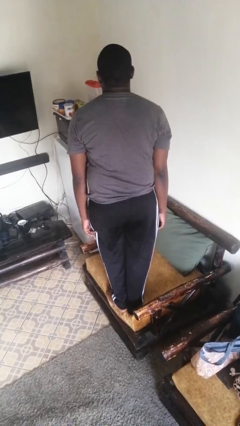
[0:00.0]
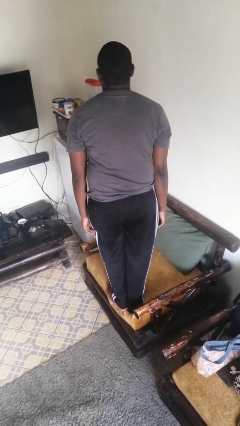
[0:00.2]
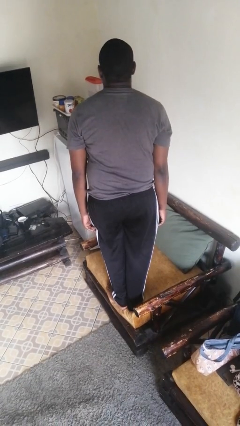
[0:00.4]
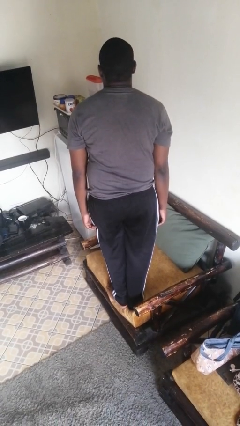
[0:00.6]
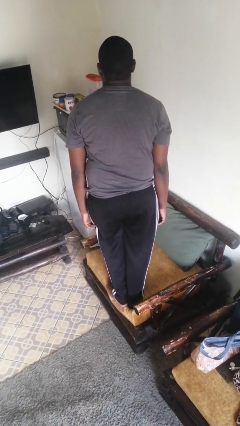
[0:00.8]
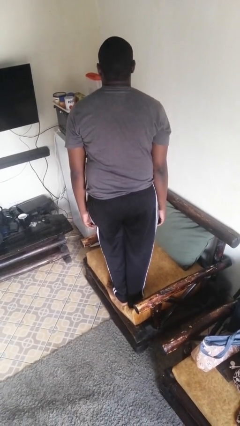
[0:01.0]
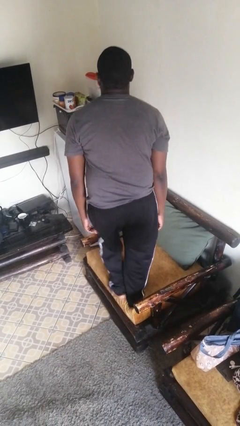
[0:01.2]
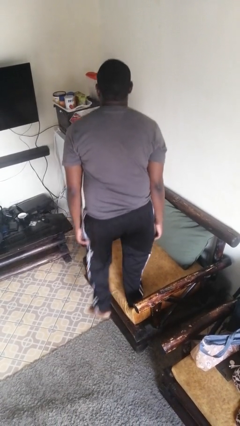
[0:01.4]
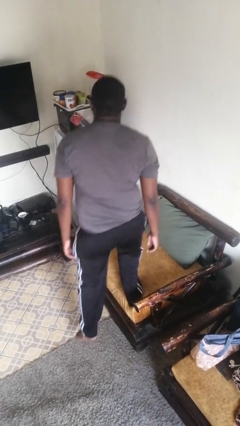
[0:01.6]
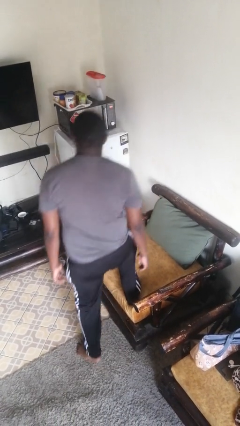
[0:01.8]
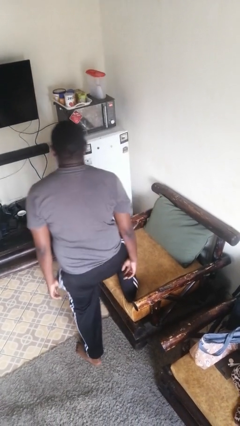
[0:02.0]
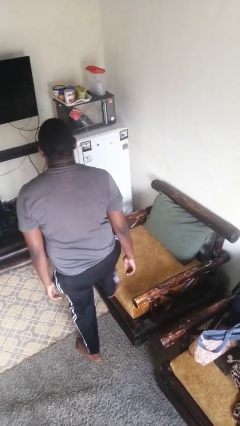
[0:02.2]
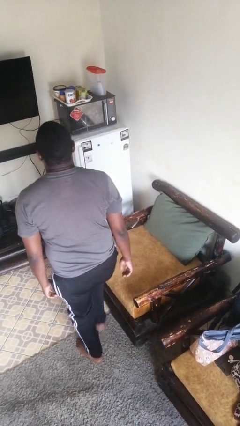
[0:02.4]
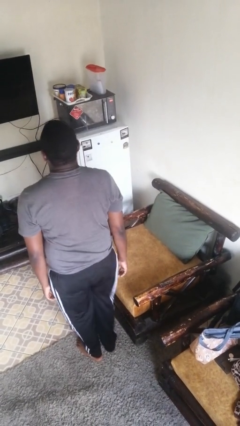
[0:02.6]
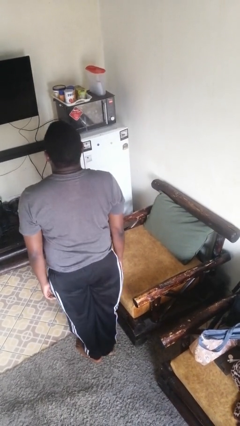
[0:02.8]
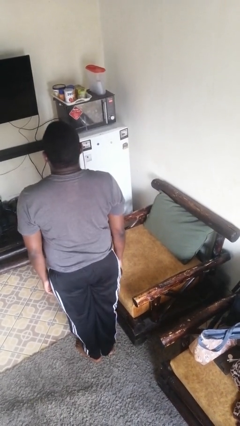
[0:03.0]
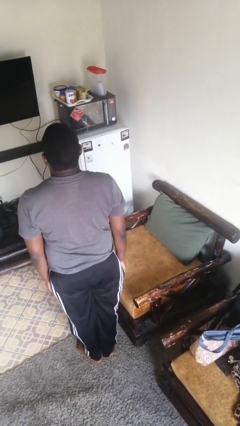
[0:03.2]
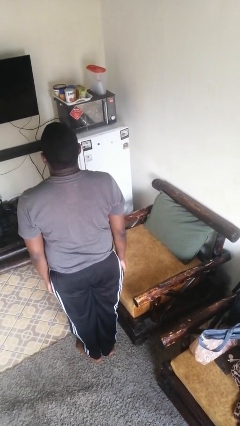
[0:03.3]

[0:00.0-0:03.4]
person climbs off couch

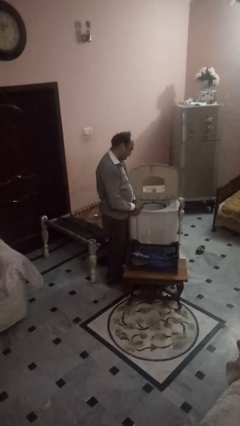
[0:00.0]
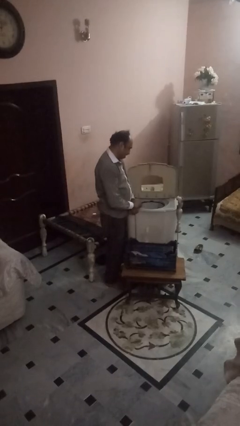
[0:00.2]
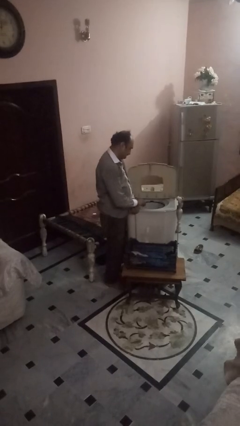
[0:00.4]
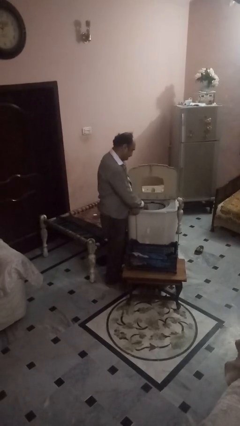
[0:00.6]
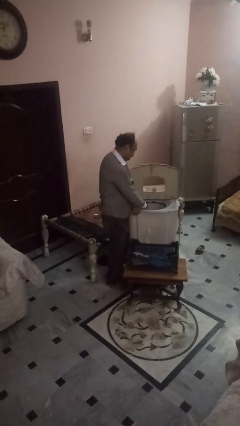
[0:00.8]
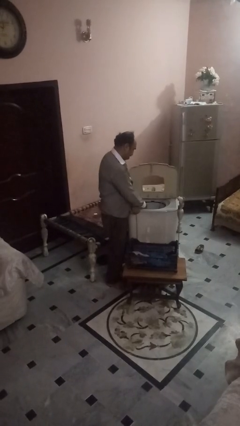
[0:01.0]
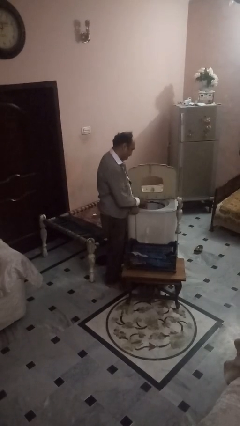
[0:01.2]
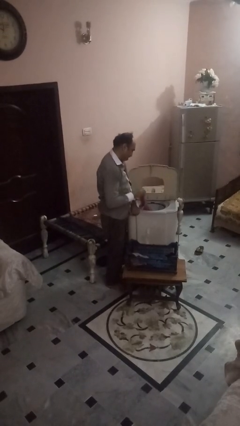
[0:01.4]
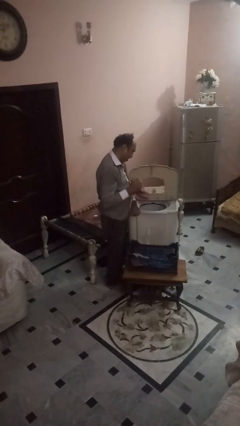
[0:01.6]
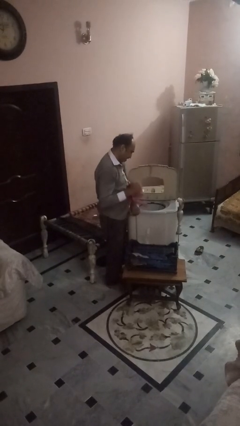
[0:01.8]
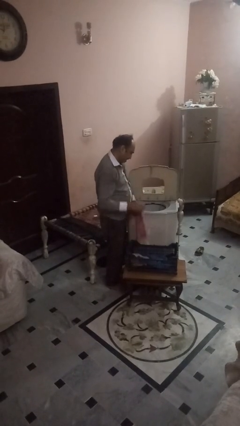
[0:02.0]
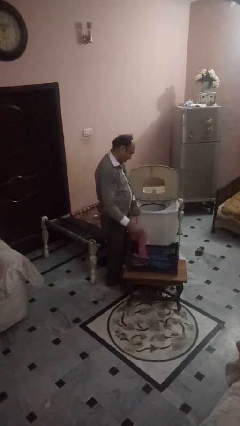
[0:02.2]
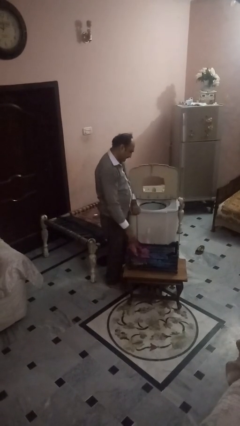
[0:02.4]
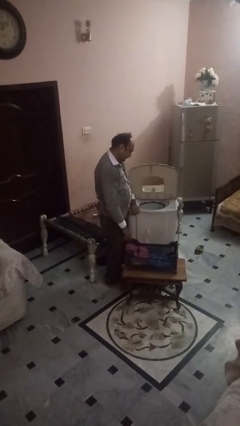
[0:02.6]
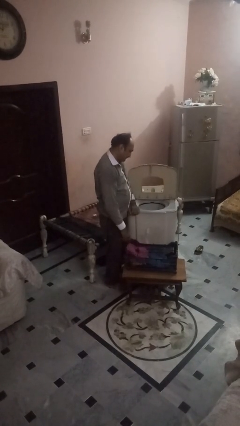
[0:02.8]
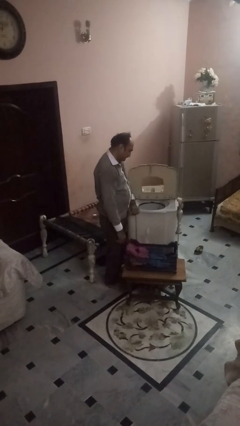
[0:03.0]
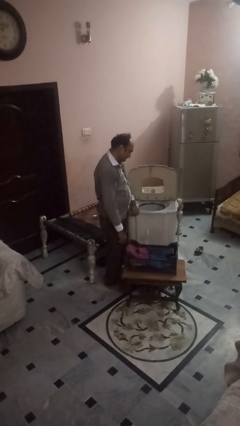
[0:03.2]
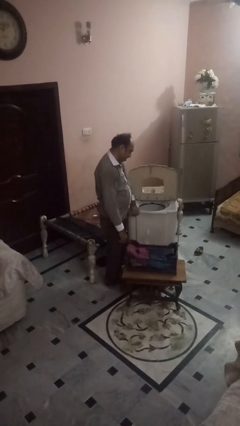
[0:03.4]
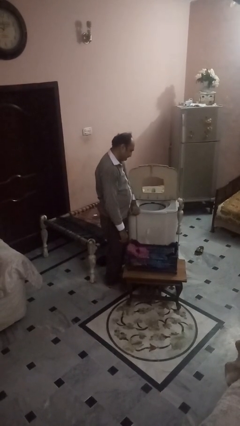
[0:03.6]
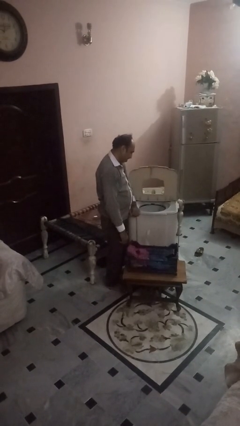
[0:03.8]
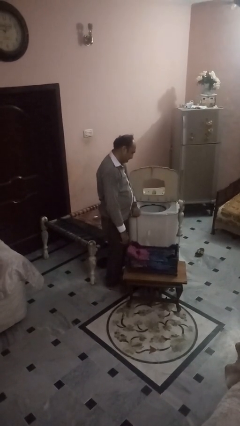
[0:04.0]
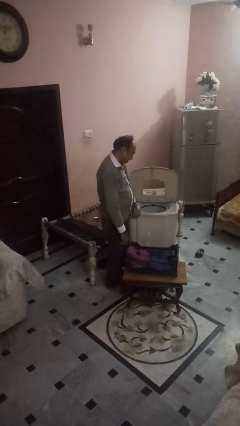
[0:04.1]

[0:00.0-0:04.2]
person unloads dryer

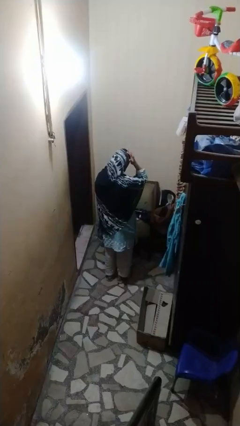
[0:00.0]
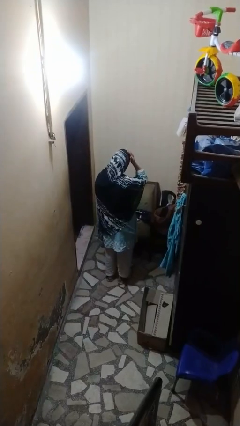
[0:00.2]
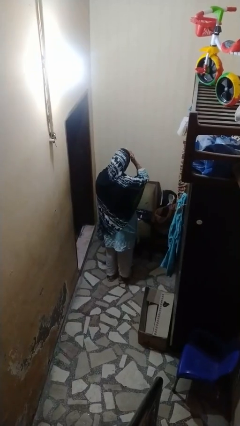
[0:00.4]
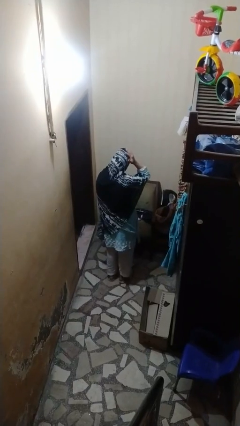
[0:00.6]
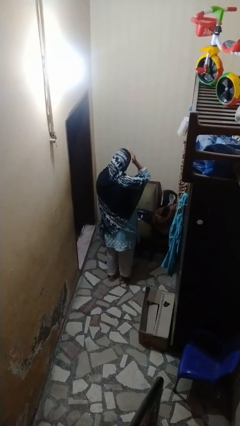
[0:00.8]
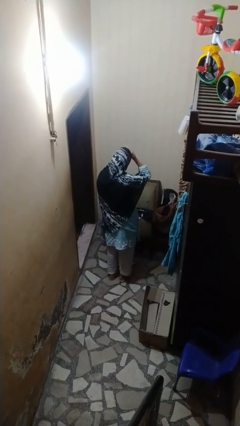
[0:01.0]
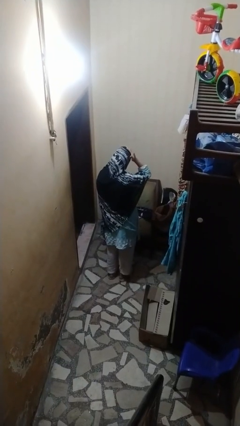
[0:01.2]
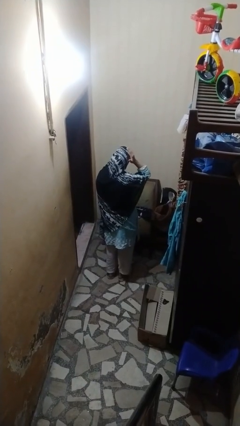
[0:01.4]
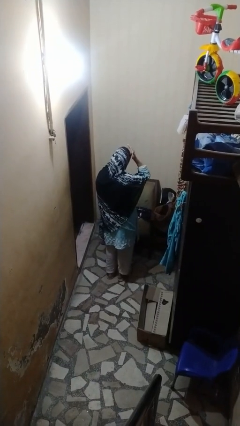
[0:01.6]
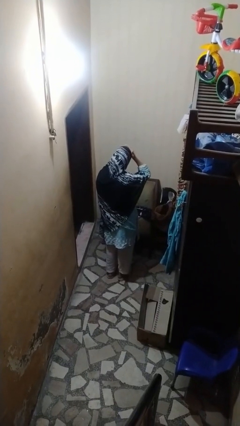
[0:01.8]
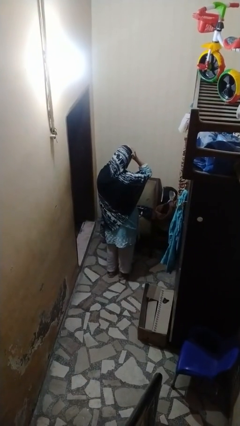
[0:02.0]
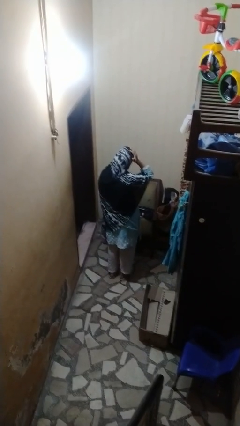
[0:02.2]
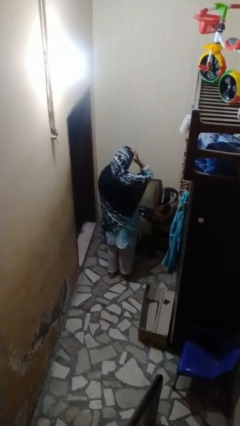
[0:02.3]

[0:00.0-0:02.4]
person pats head

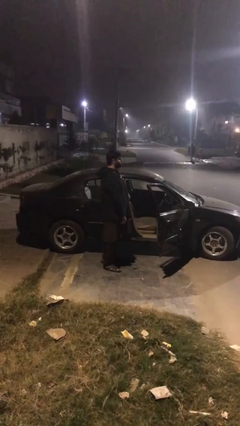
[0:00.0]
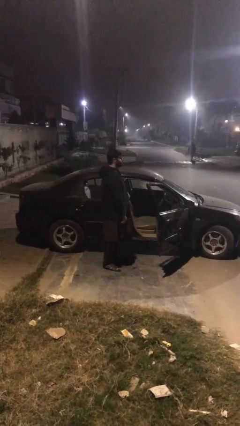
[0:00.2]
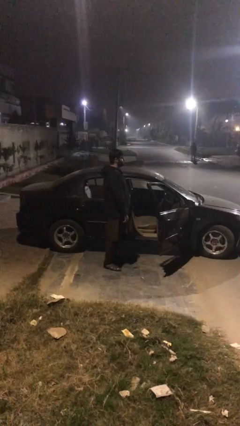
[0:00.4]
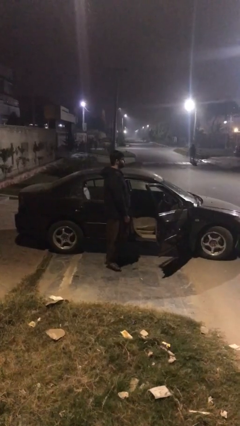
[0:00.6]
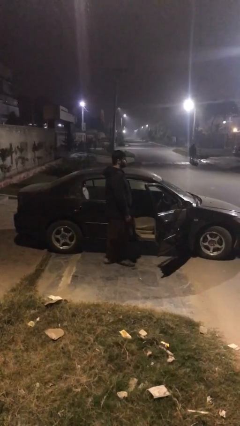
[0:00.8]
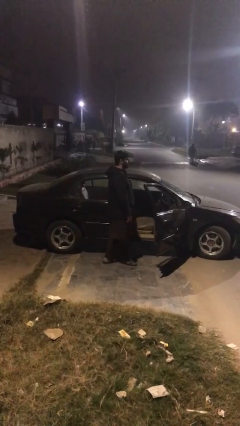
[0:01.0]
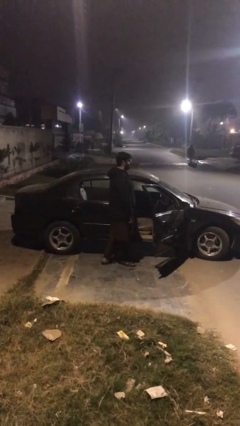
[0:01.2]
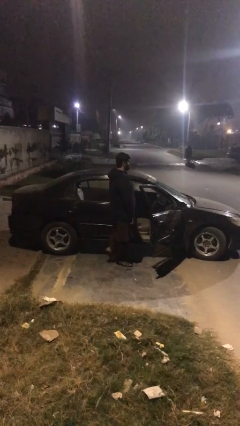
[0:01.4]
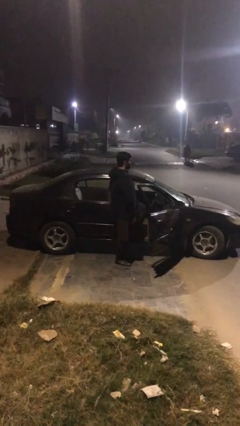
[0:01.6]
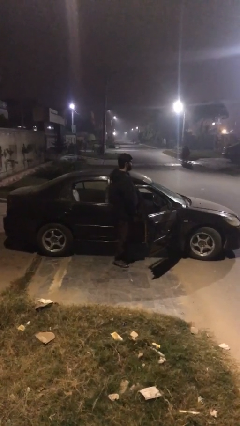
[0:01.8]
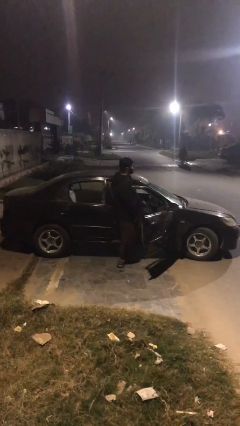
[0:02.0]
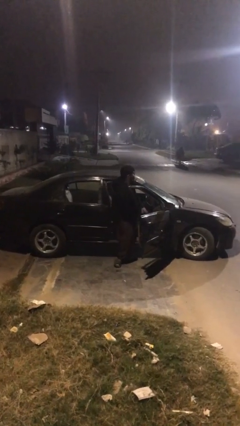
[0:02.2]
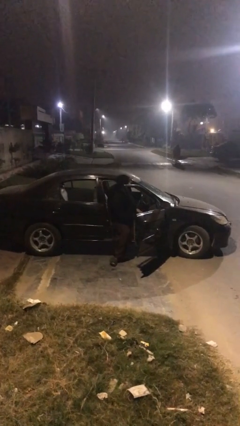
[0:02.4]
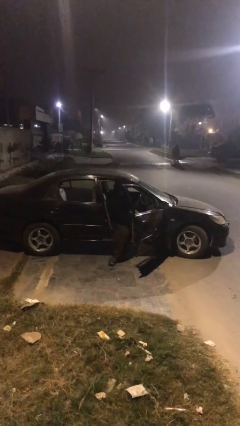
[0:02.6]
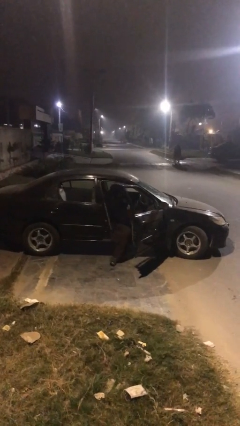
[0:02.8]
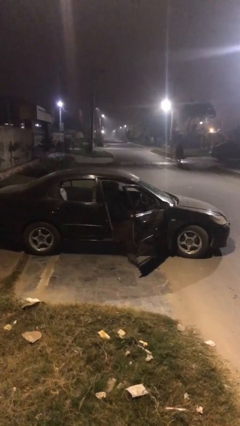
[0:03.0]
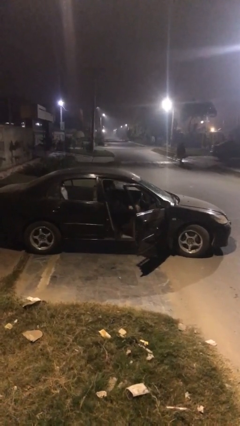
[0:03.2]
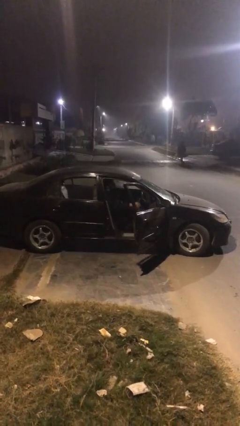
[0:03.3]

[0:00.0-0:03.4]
person enters car

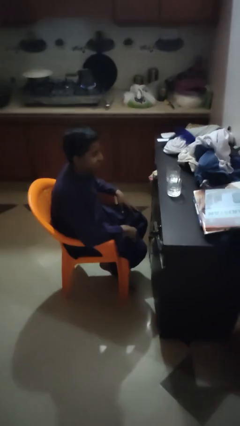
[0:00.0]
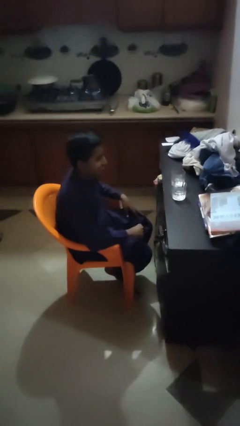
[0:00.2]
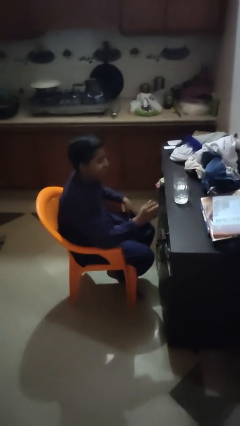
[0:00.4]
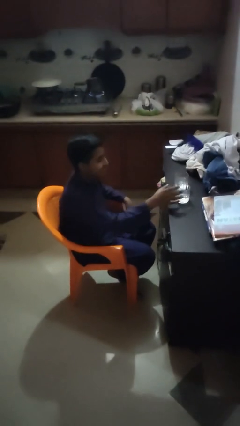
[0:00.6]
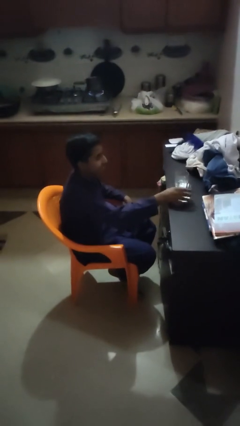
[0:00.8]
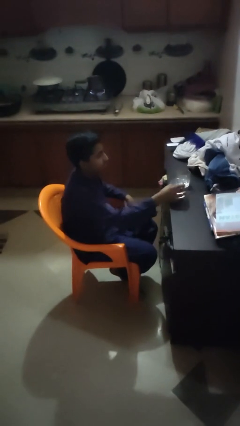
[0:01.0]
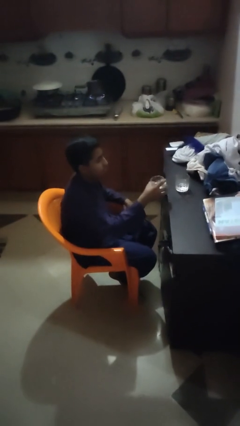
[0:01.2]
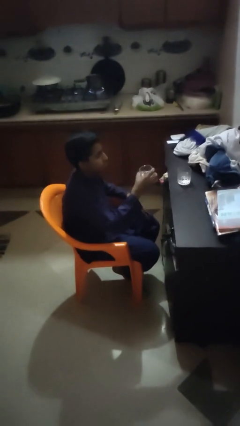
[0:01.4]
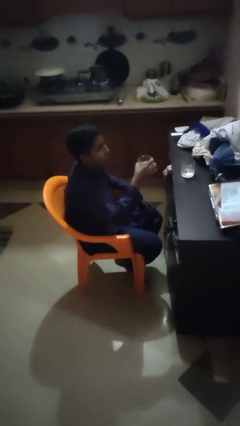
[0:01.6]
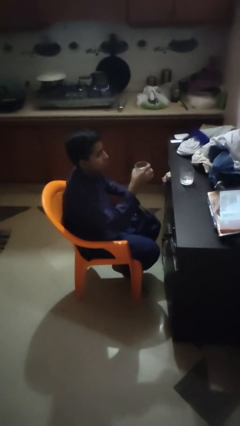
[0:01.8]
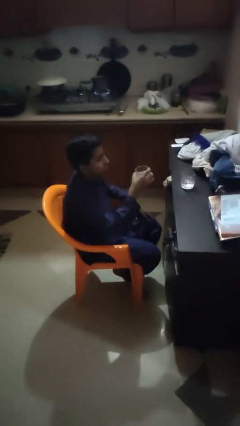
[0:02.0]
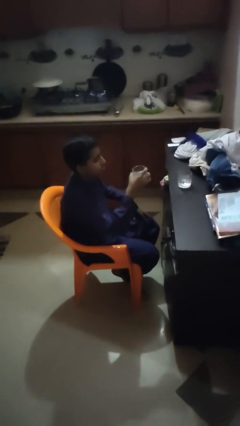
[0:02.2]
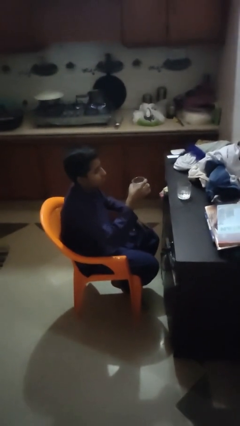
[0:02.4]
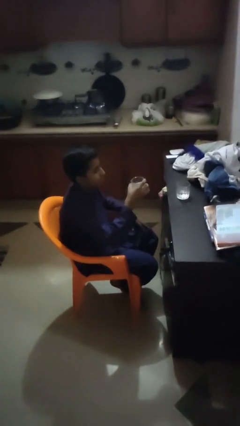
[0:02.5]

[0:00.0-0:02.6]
person picks up object from table

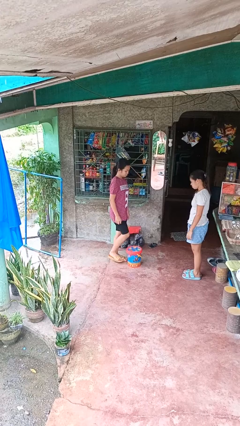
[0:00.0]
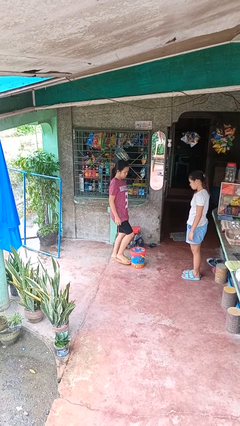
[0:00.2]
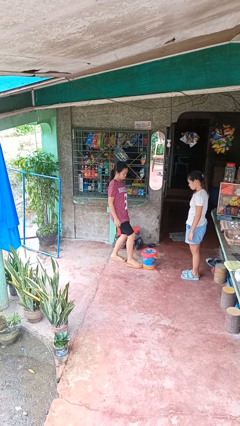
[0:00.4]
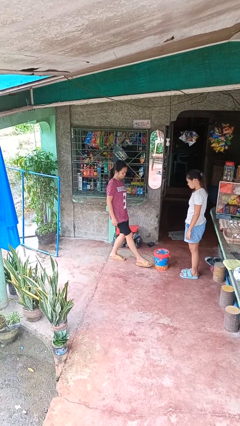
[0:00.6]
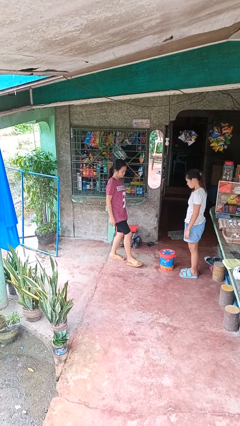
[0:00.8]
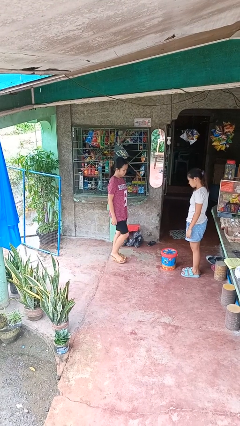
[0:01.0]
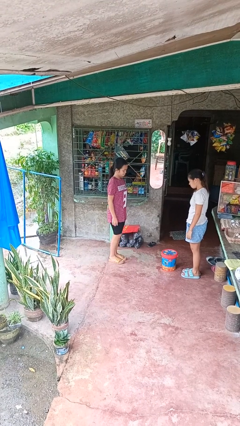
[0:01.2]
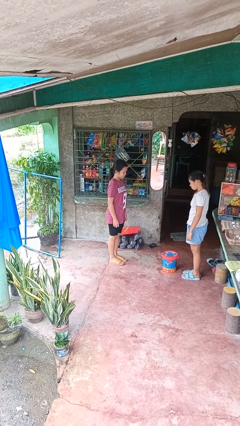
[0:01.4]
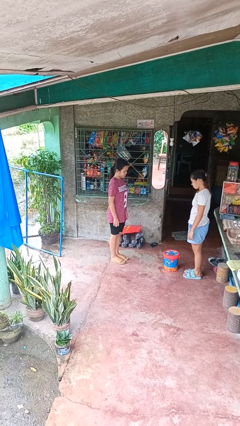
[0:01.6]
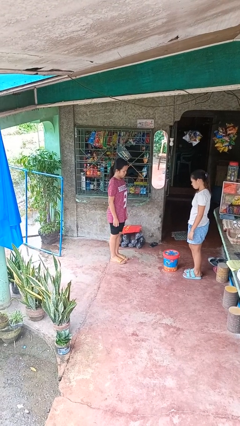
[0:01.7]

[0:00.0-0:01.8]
person kicks object to person
